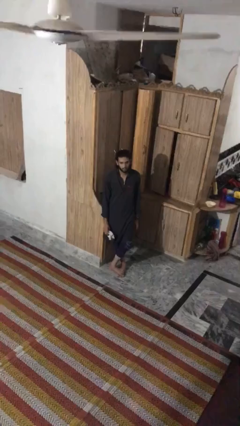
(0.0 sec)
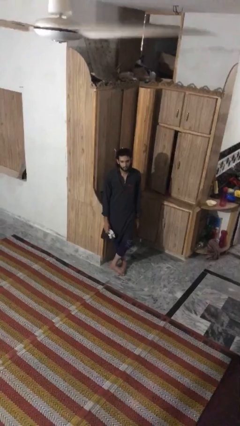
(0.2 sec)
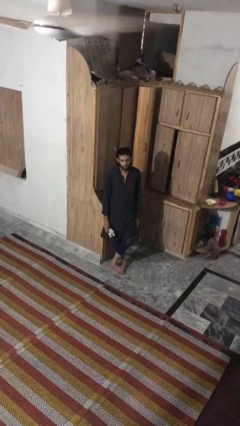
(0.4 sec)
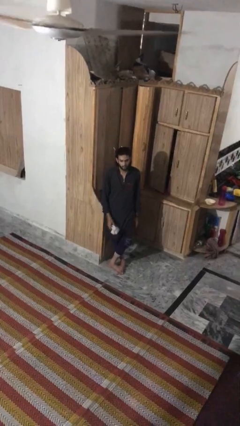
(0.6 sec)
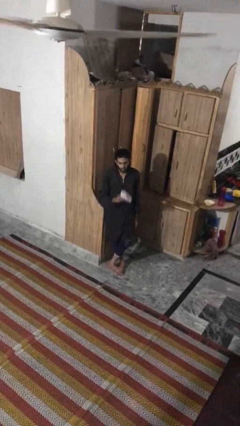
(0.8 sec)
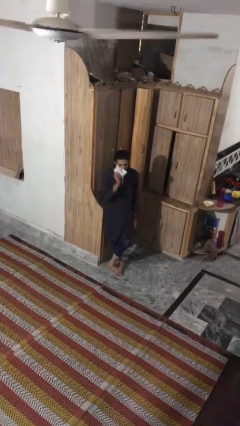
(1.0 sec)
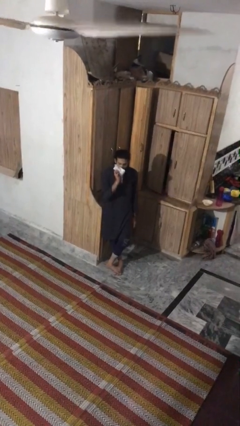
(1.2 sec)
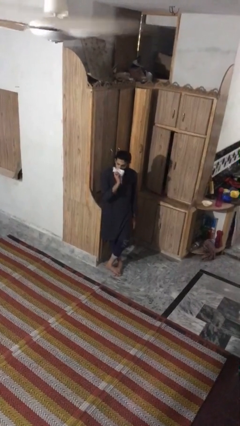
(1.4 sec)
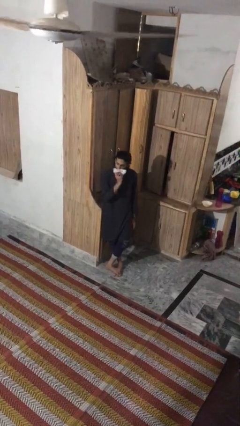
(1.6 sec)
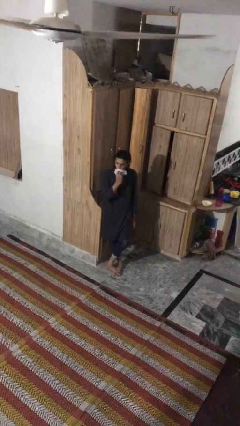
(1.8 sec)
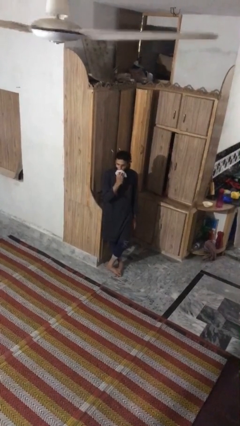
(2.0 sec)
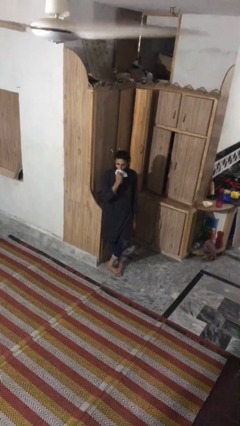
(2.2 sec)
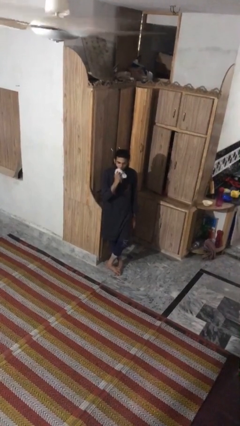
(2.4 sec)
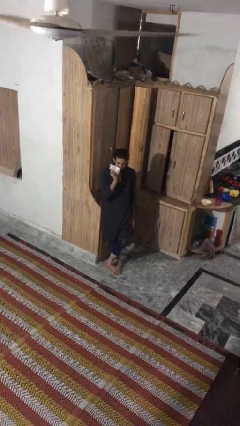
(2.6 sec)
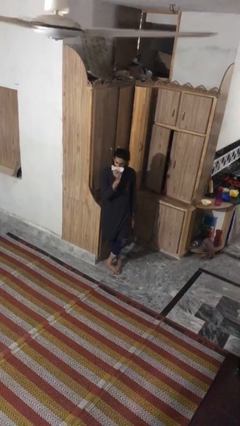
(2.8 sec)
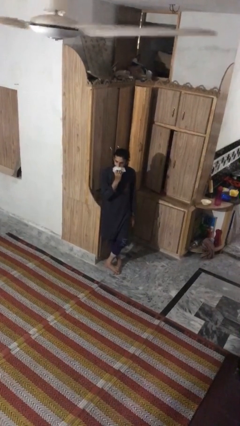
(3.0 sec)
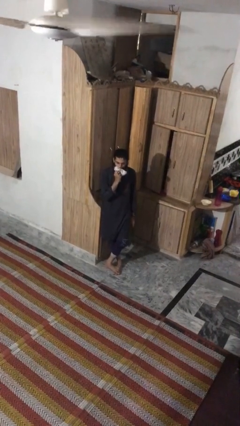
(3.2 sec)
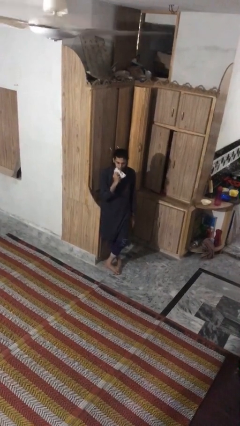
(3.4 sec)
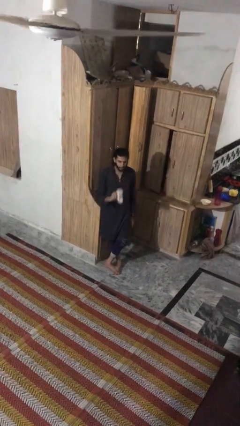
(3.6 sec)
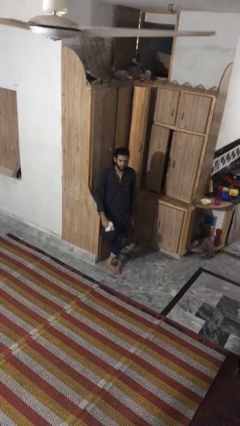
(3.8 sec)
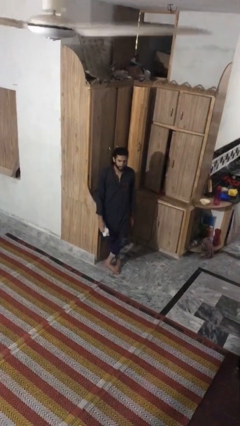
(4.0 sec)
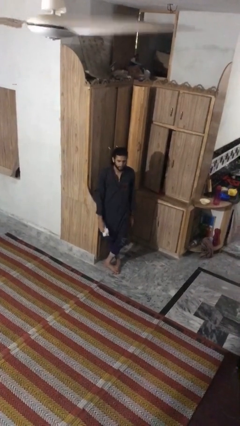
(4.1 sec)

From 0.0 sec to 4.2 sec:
person wipes mouth with napkin

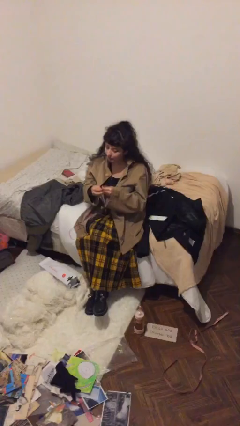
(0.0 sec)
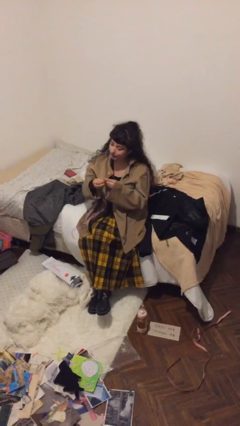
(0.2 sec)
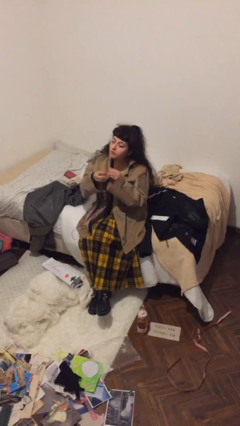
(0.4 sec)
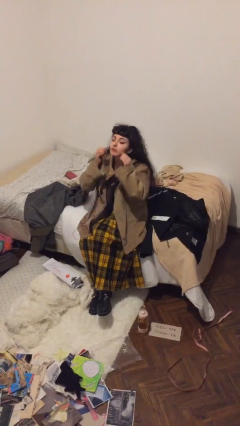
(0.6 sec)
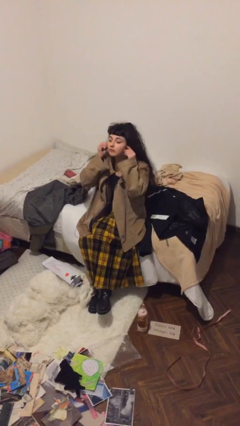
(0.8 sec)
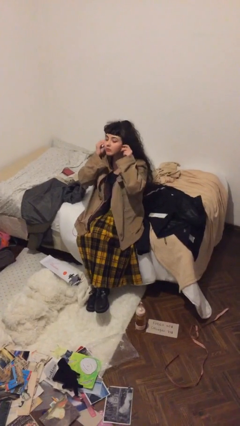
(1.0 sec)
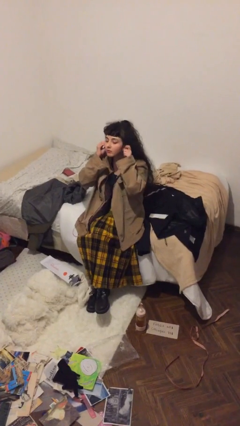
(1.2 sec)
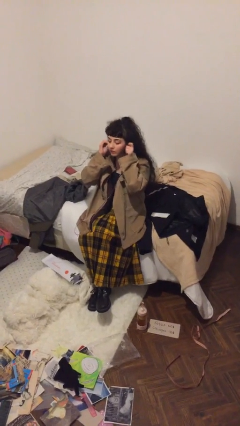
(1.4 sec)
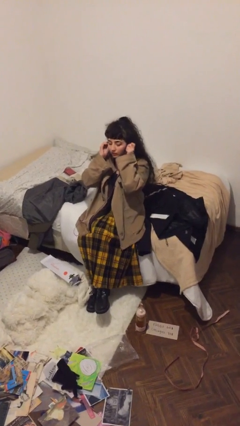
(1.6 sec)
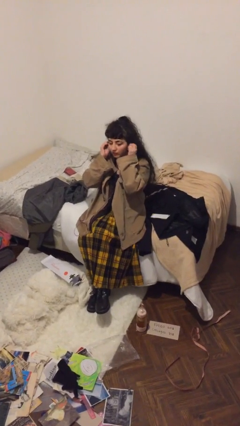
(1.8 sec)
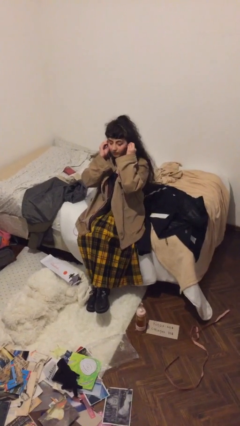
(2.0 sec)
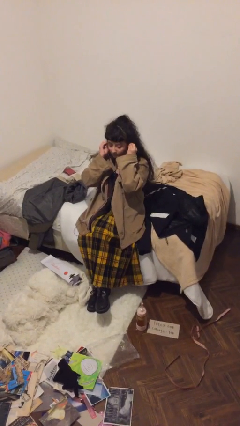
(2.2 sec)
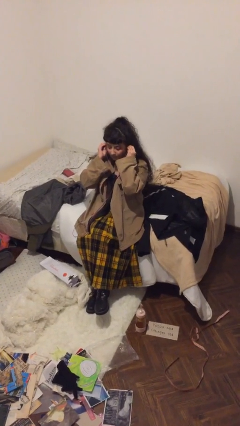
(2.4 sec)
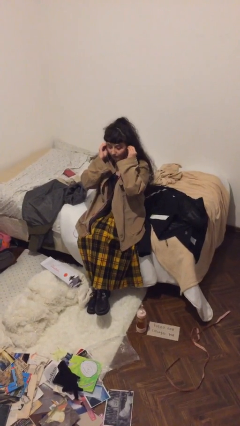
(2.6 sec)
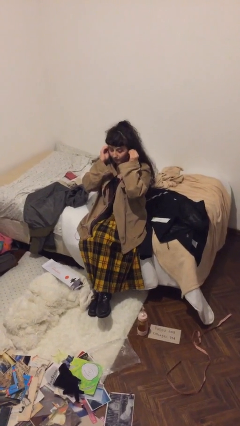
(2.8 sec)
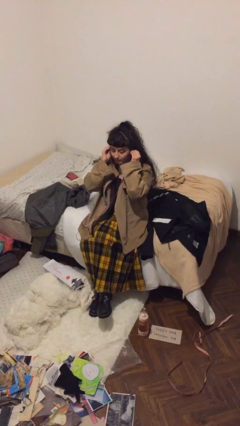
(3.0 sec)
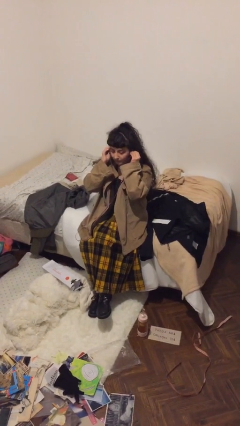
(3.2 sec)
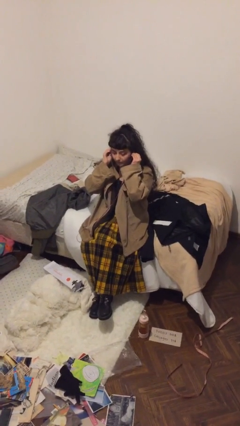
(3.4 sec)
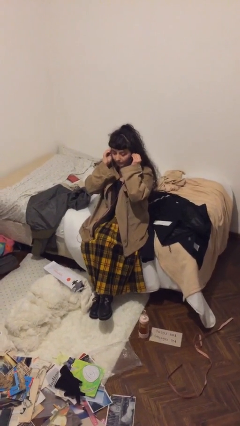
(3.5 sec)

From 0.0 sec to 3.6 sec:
person puts on headphones

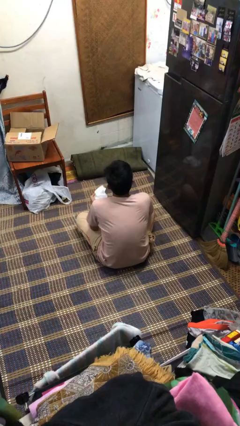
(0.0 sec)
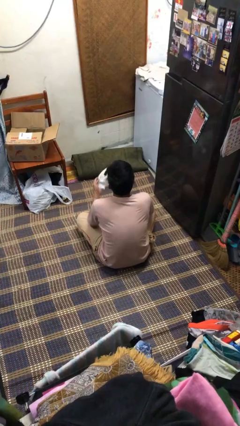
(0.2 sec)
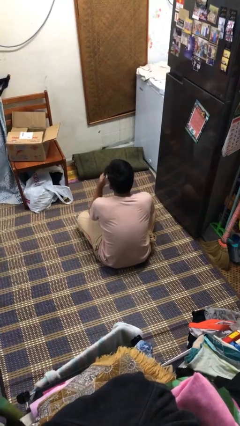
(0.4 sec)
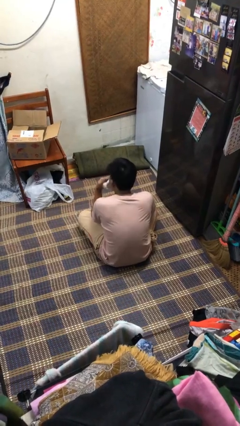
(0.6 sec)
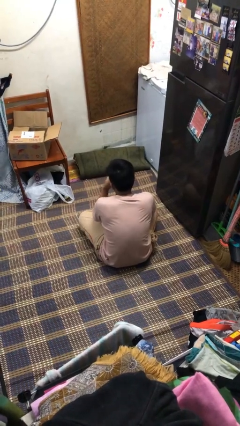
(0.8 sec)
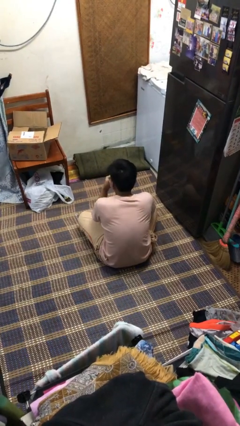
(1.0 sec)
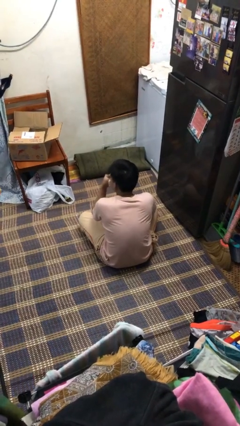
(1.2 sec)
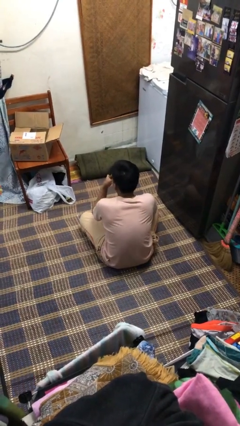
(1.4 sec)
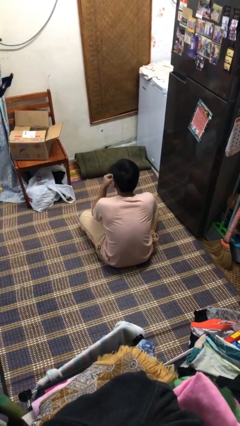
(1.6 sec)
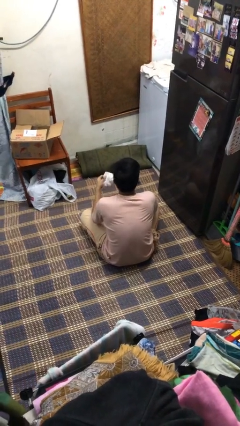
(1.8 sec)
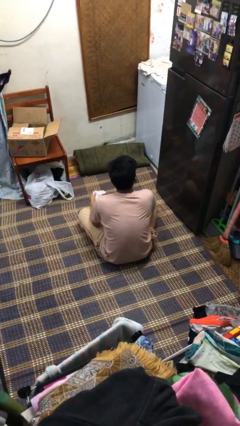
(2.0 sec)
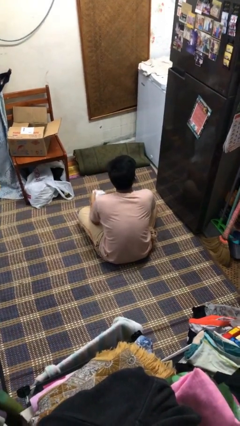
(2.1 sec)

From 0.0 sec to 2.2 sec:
person blows nose

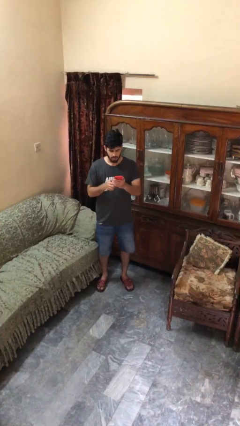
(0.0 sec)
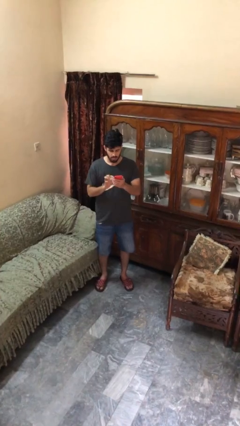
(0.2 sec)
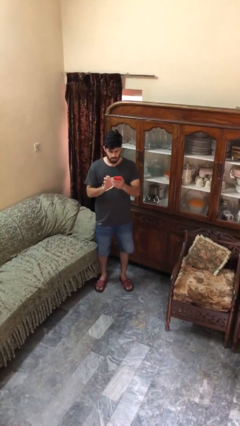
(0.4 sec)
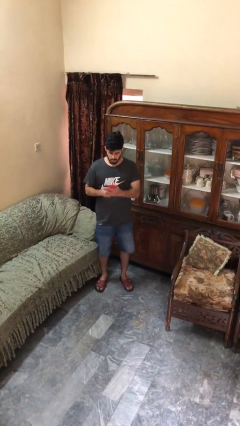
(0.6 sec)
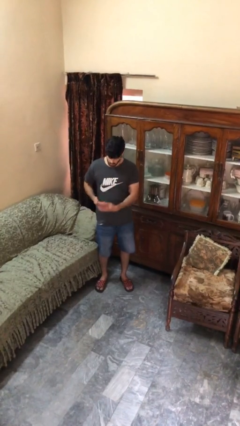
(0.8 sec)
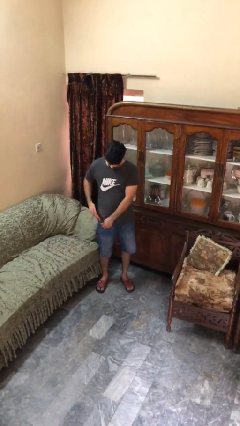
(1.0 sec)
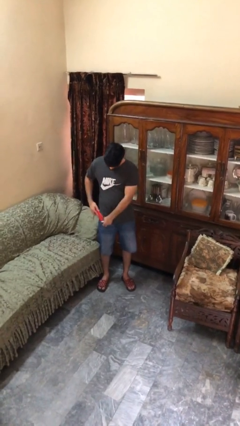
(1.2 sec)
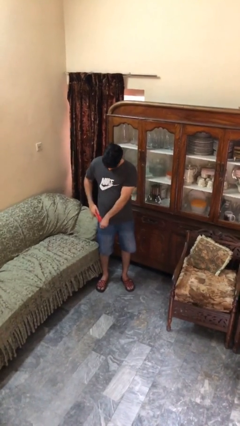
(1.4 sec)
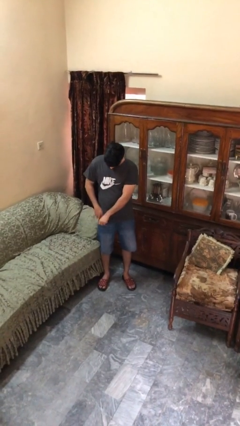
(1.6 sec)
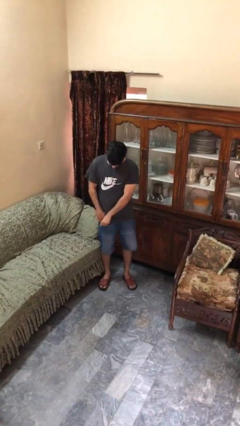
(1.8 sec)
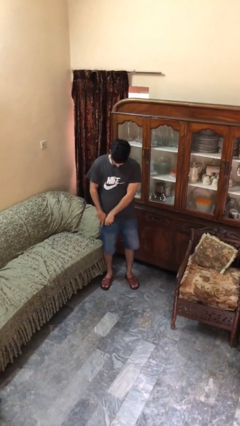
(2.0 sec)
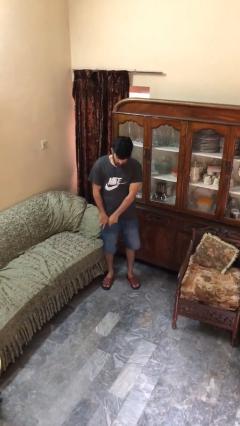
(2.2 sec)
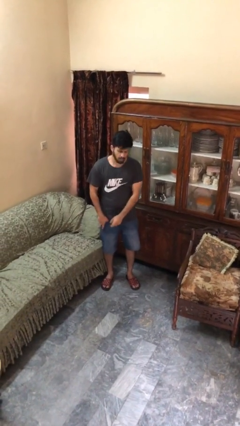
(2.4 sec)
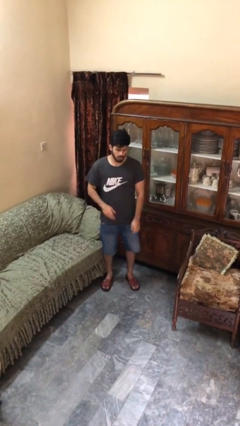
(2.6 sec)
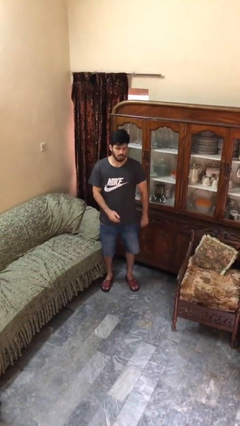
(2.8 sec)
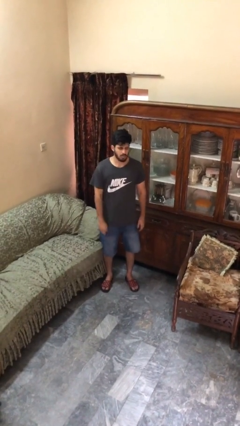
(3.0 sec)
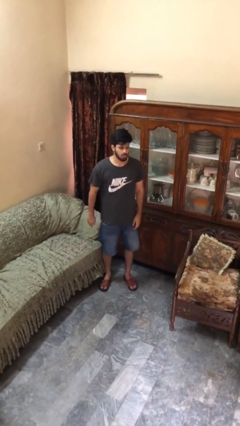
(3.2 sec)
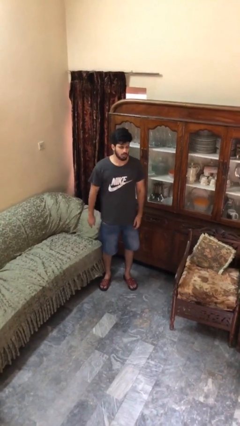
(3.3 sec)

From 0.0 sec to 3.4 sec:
person puts phone into pocket

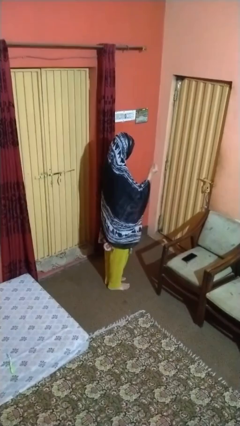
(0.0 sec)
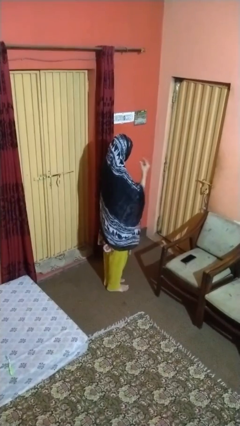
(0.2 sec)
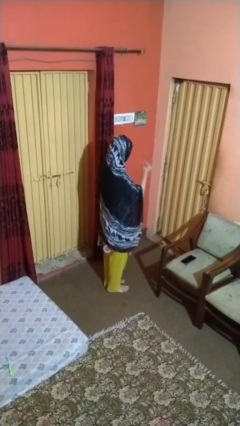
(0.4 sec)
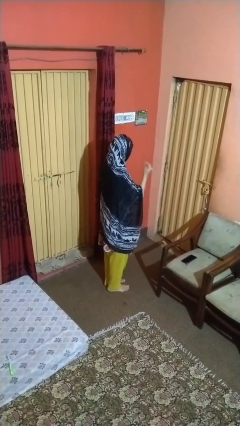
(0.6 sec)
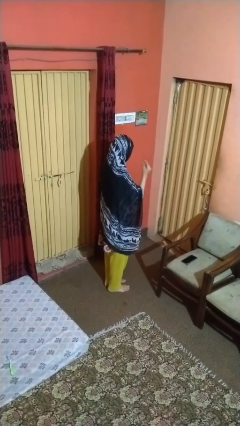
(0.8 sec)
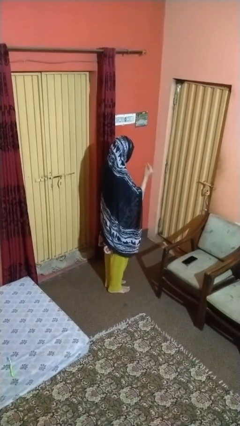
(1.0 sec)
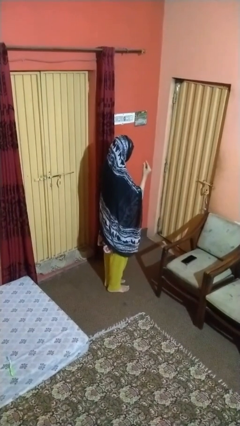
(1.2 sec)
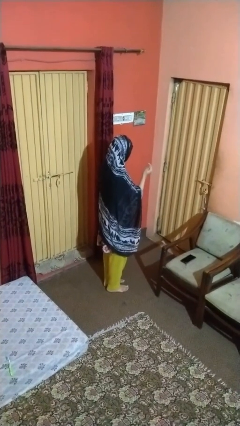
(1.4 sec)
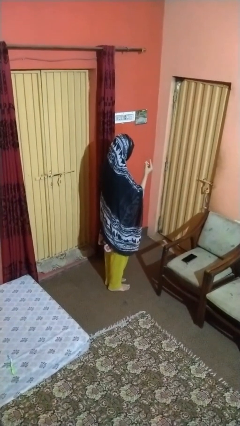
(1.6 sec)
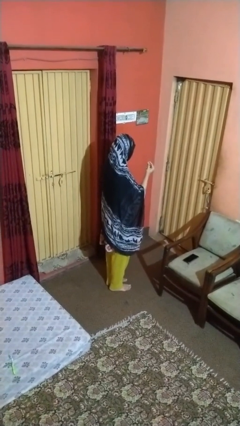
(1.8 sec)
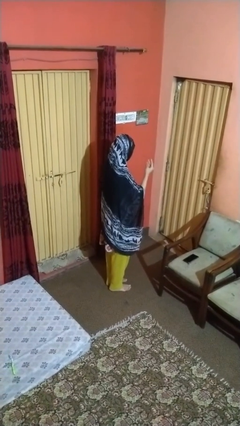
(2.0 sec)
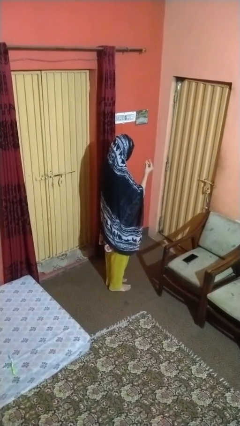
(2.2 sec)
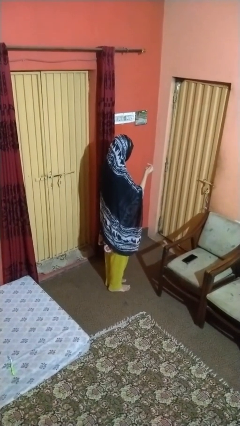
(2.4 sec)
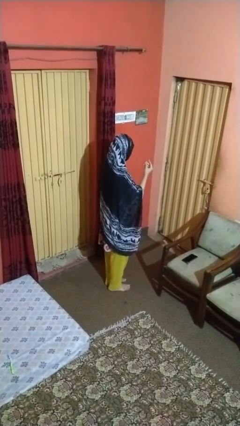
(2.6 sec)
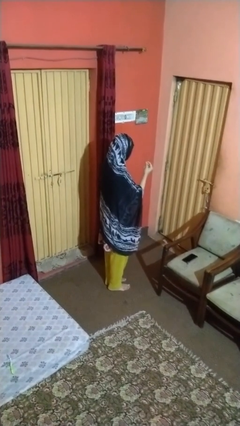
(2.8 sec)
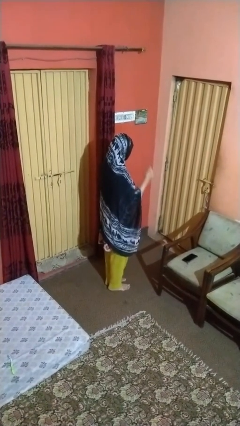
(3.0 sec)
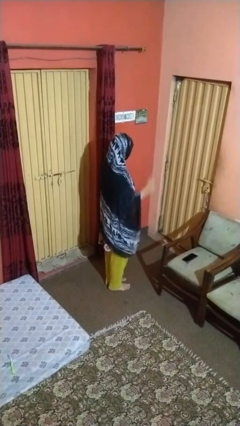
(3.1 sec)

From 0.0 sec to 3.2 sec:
person snaps fingers

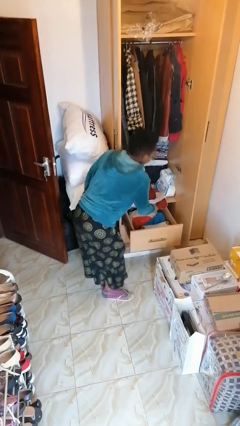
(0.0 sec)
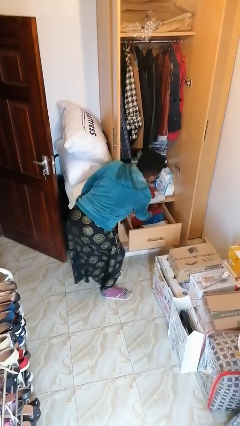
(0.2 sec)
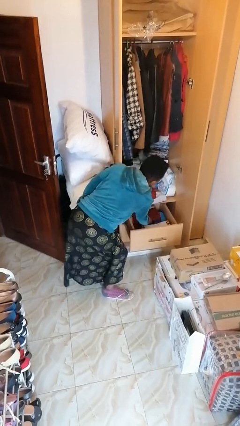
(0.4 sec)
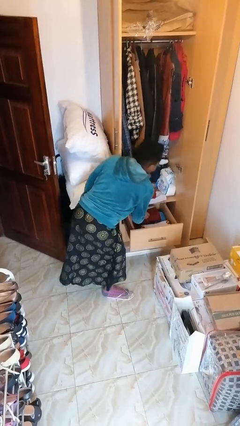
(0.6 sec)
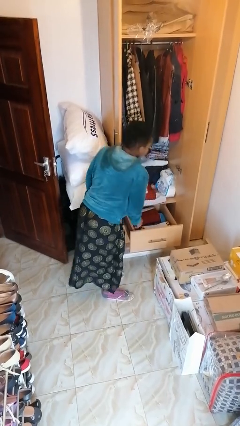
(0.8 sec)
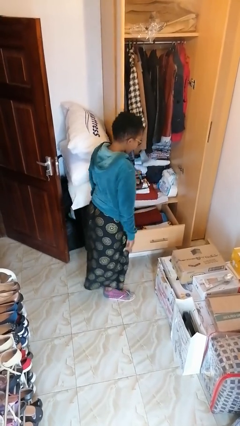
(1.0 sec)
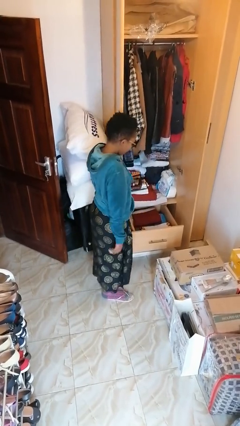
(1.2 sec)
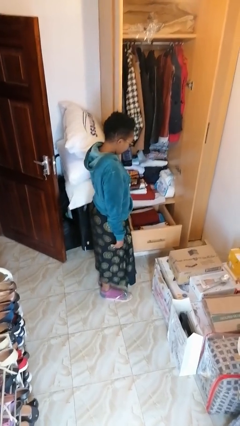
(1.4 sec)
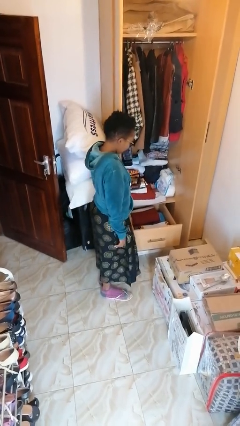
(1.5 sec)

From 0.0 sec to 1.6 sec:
person puts clothes into dresser
